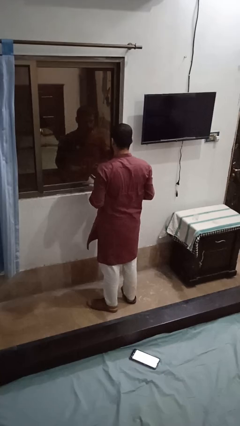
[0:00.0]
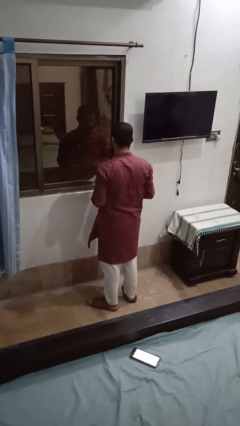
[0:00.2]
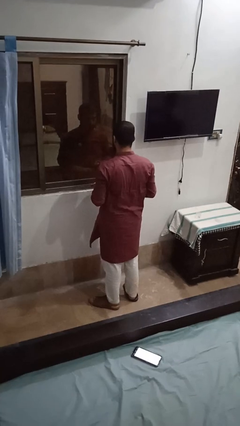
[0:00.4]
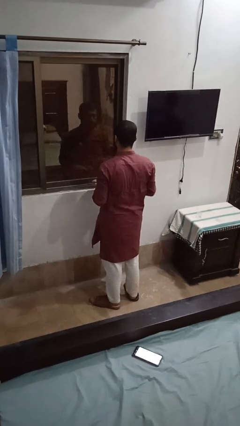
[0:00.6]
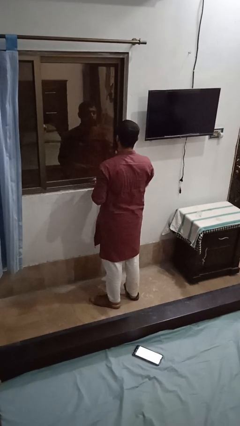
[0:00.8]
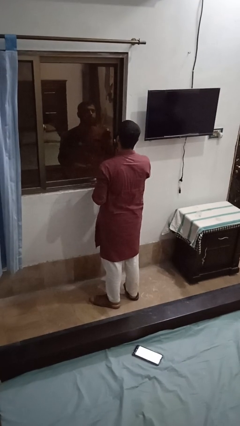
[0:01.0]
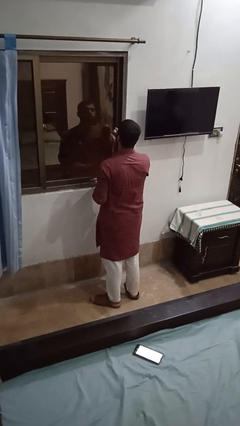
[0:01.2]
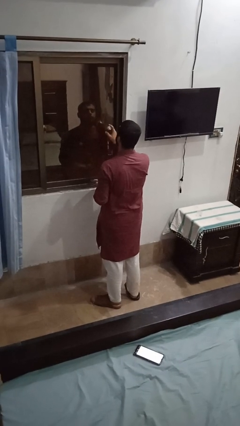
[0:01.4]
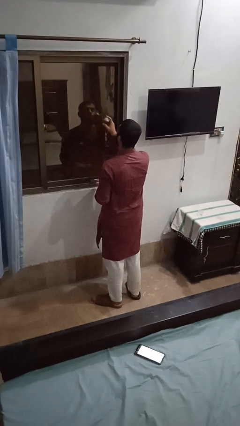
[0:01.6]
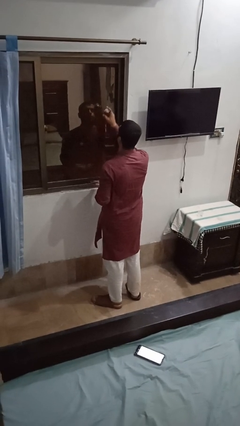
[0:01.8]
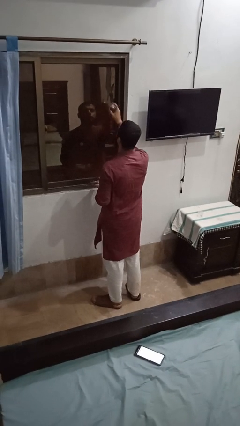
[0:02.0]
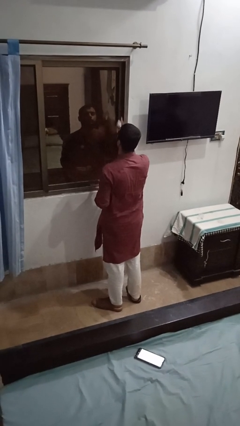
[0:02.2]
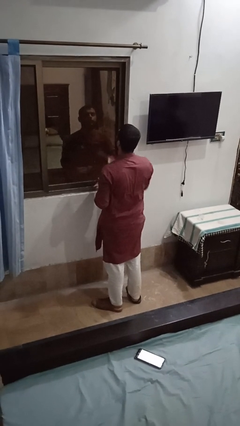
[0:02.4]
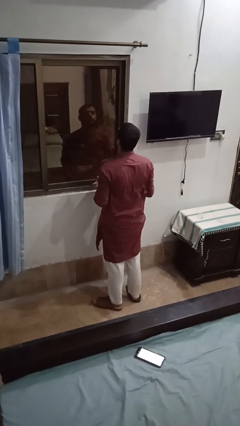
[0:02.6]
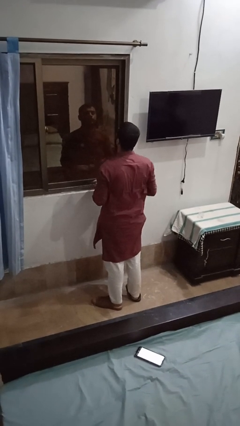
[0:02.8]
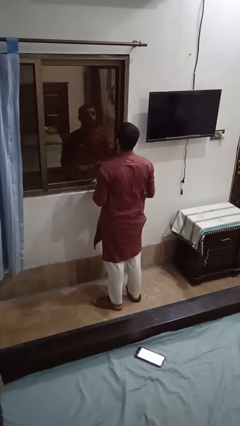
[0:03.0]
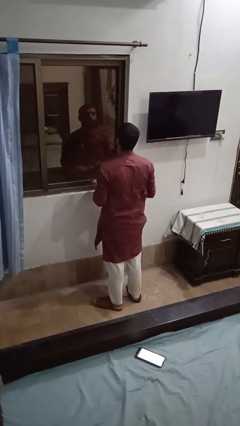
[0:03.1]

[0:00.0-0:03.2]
person sprays from bottle

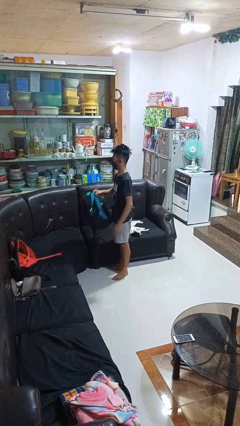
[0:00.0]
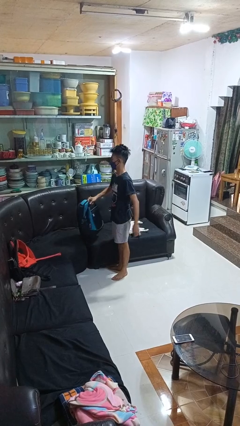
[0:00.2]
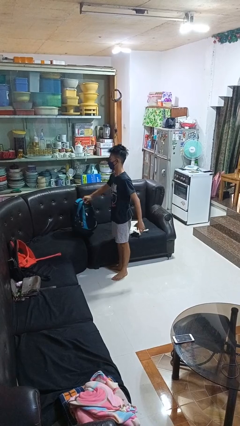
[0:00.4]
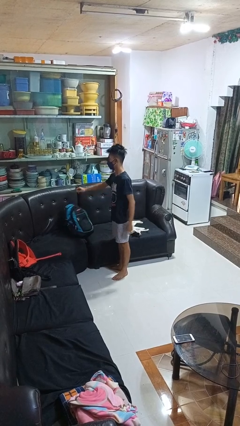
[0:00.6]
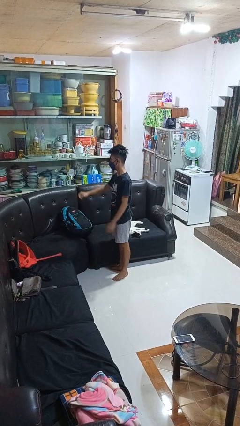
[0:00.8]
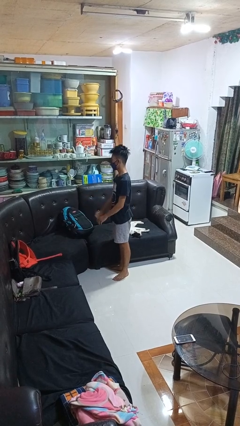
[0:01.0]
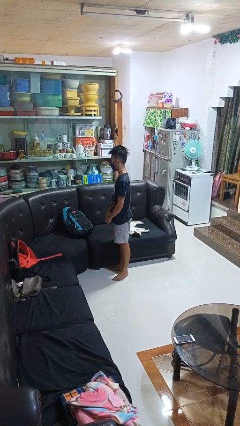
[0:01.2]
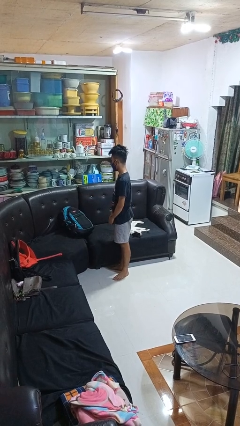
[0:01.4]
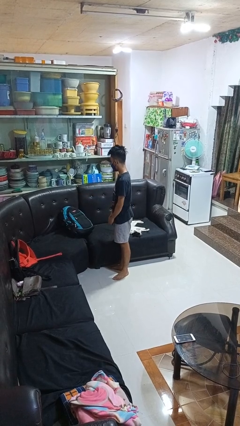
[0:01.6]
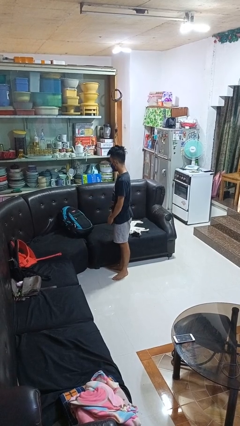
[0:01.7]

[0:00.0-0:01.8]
person puts down object on couch

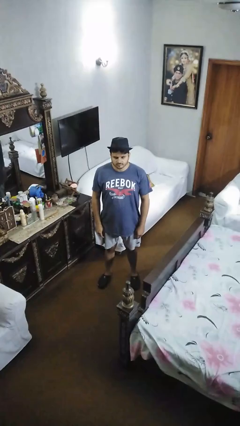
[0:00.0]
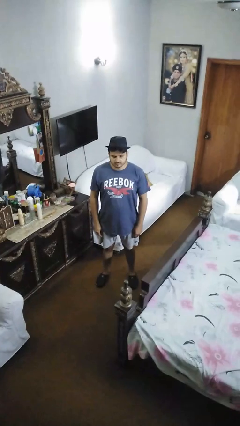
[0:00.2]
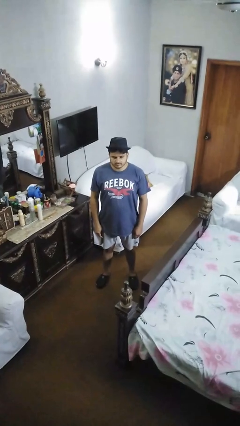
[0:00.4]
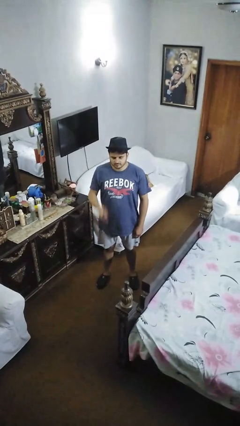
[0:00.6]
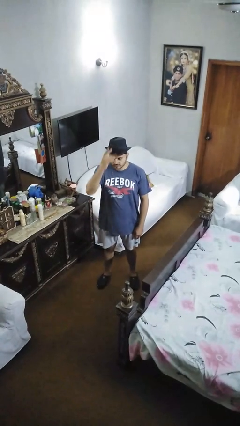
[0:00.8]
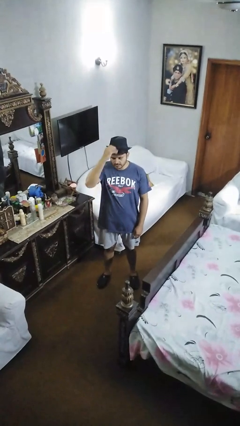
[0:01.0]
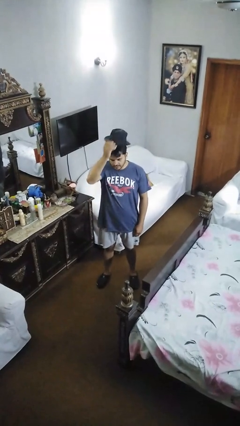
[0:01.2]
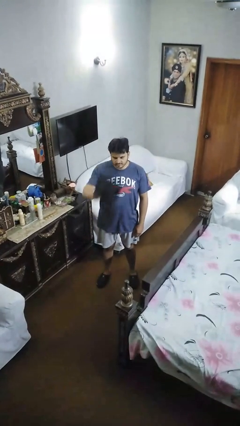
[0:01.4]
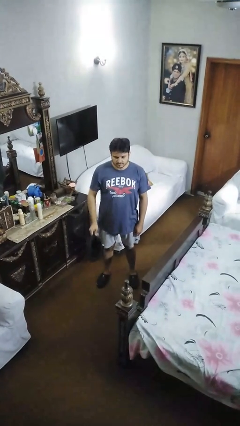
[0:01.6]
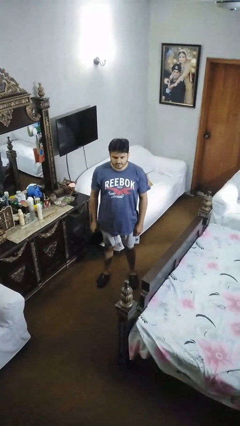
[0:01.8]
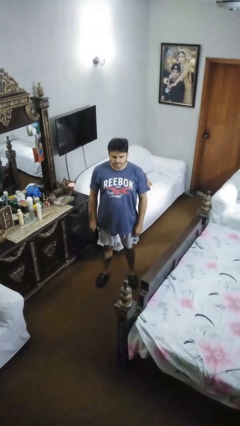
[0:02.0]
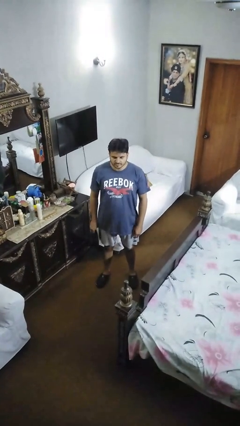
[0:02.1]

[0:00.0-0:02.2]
person takes off hat

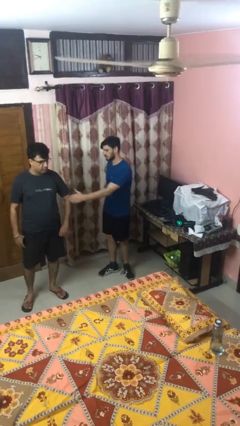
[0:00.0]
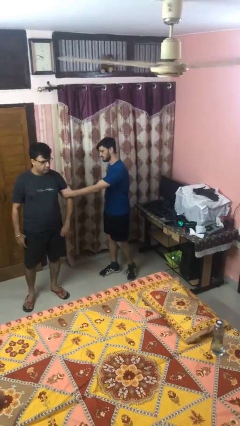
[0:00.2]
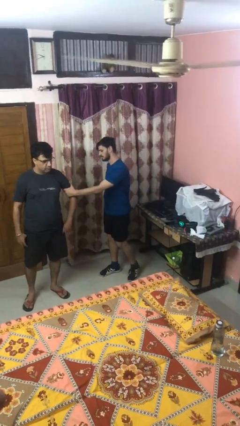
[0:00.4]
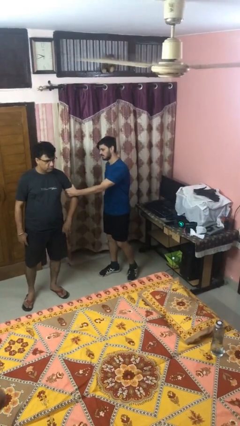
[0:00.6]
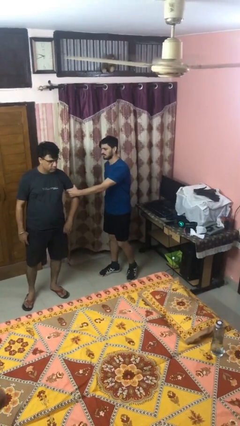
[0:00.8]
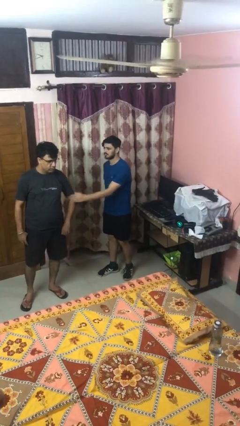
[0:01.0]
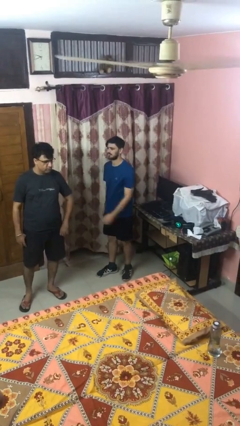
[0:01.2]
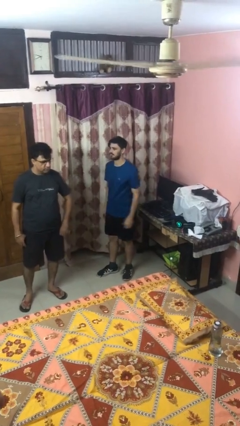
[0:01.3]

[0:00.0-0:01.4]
person grabs person by bicep

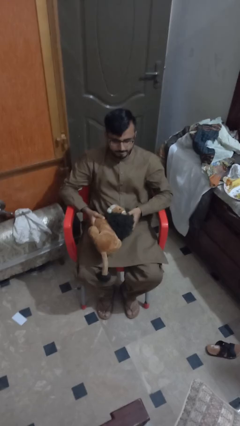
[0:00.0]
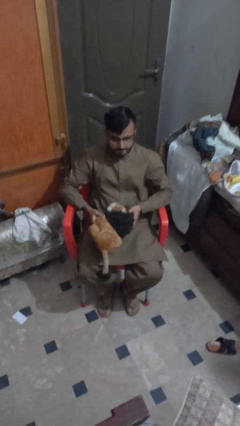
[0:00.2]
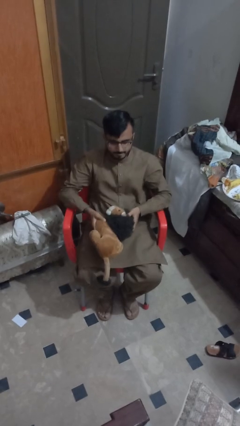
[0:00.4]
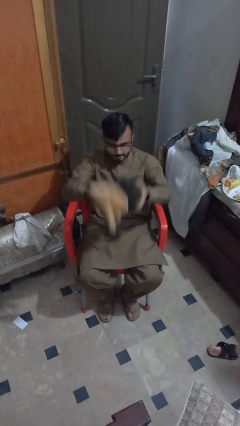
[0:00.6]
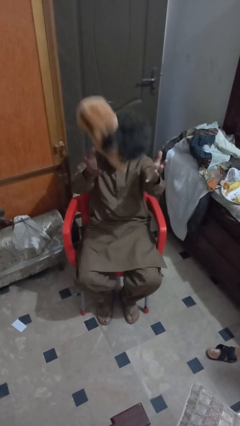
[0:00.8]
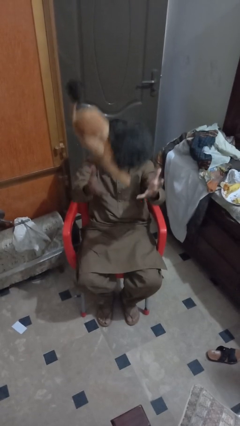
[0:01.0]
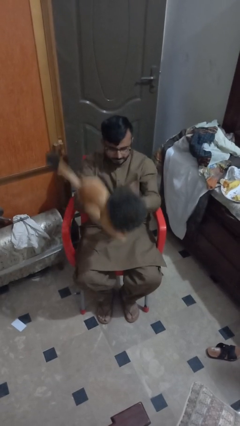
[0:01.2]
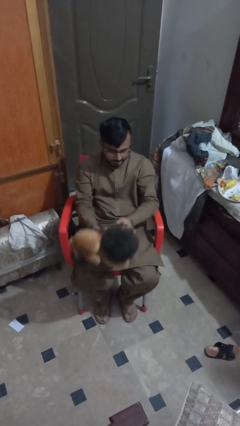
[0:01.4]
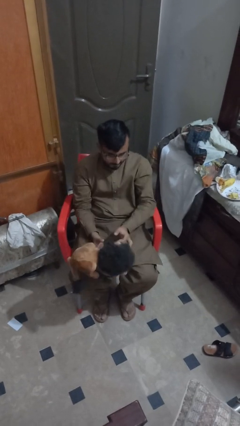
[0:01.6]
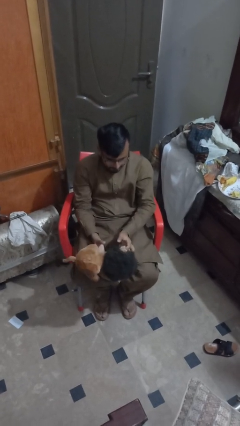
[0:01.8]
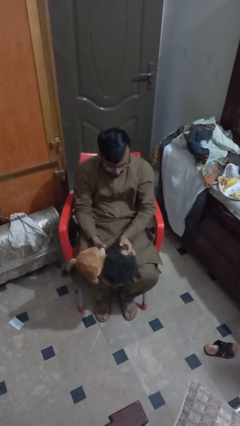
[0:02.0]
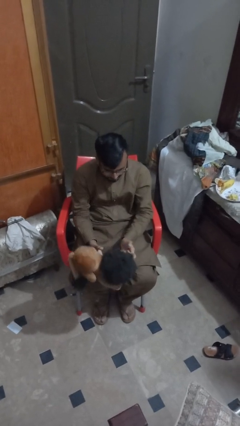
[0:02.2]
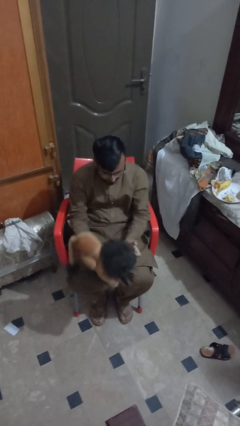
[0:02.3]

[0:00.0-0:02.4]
person drops object

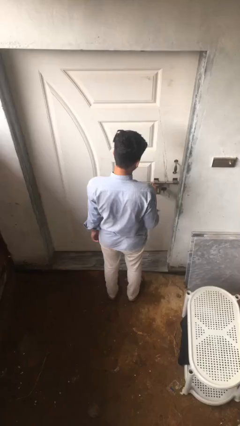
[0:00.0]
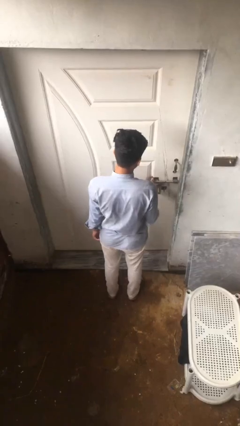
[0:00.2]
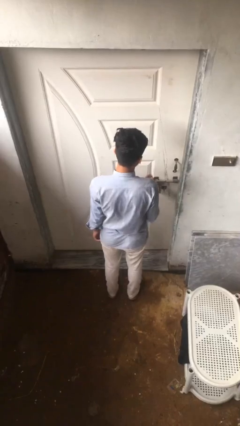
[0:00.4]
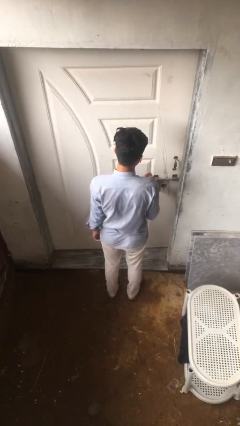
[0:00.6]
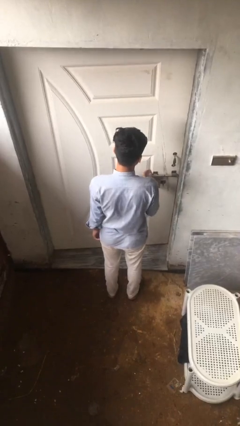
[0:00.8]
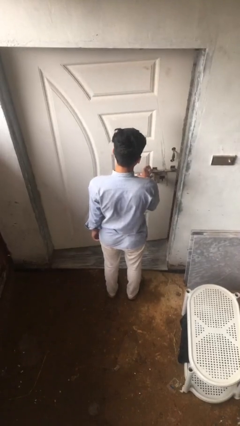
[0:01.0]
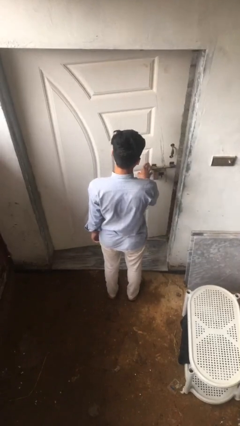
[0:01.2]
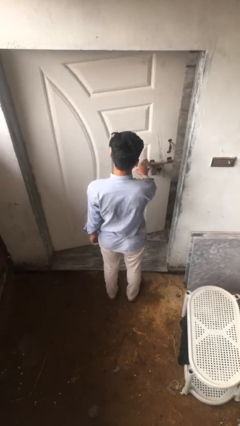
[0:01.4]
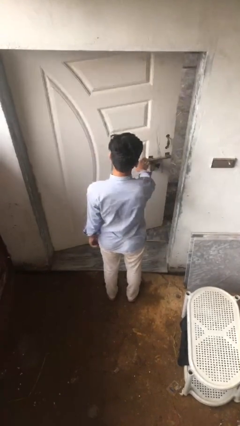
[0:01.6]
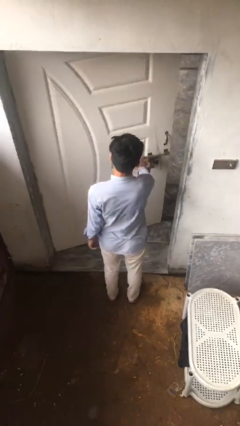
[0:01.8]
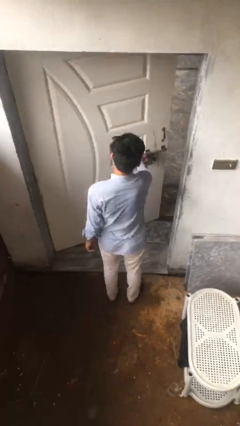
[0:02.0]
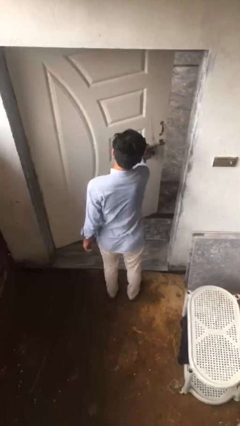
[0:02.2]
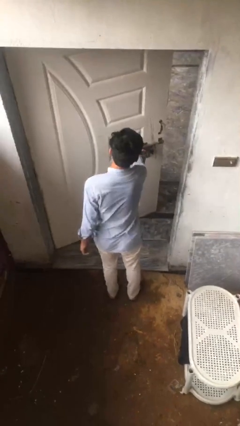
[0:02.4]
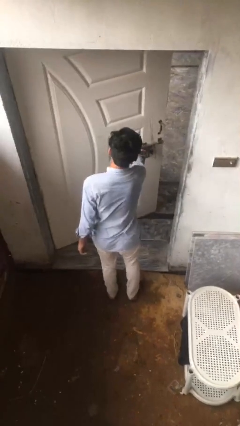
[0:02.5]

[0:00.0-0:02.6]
person opens facility door

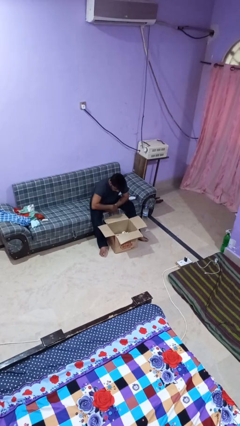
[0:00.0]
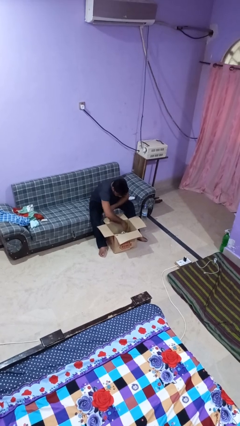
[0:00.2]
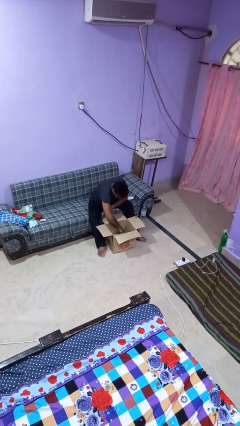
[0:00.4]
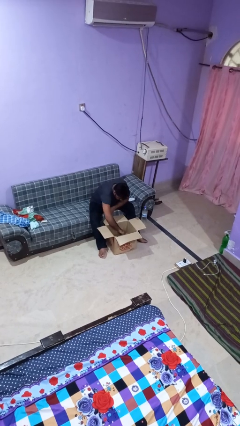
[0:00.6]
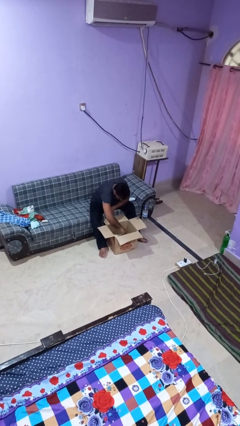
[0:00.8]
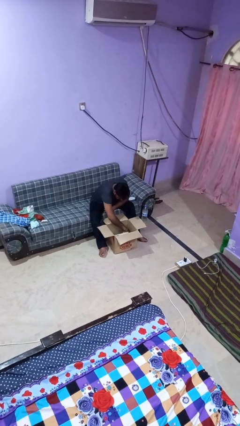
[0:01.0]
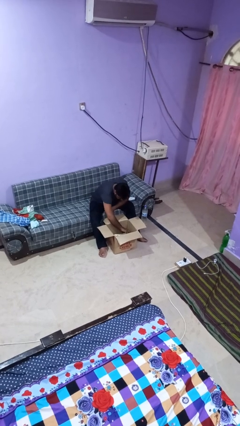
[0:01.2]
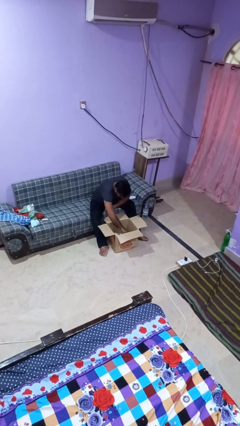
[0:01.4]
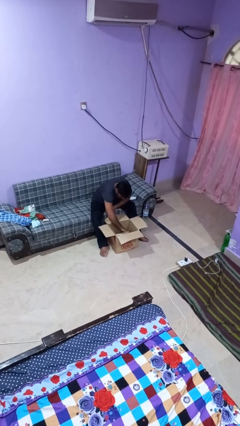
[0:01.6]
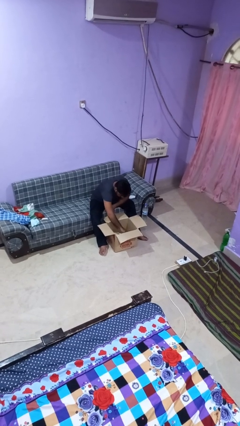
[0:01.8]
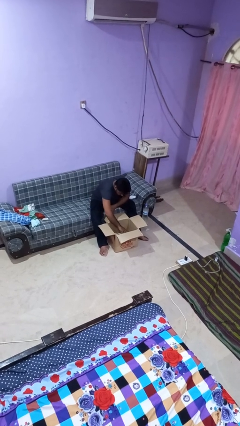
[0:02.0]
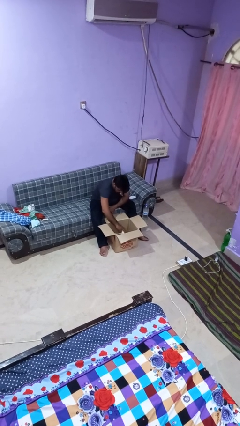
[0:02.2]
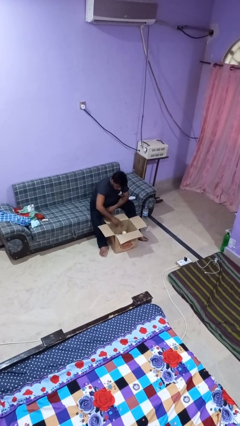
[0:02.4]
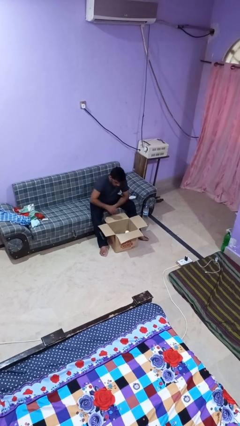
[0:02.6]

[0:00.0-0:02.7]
person searches in box

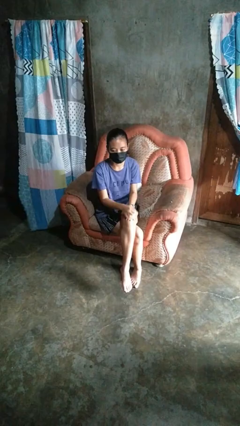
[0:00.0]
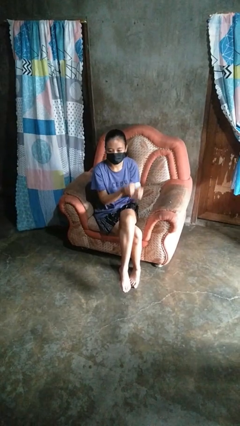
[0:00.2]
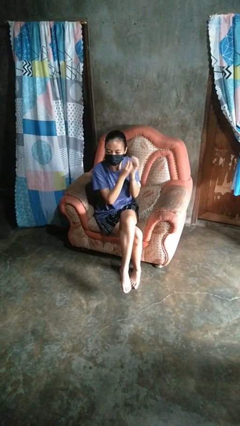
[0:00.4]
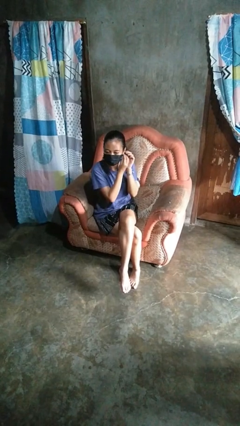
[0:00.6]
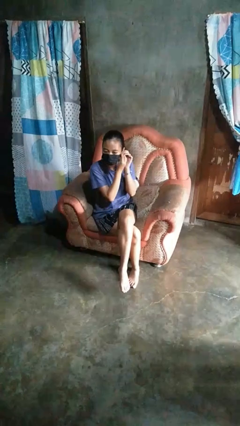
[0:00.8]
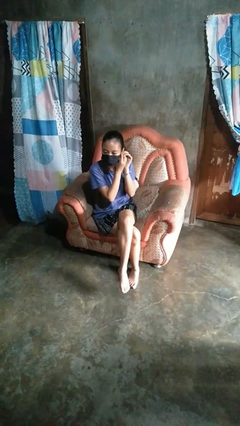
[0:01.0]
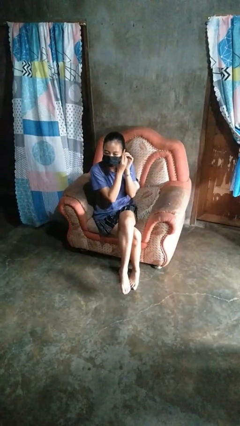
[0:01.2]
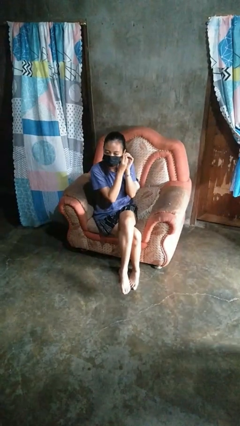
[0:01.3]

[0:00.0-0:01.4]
person takes off earrings
